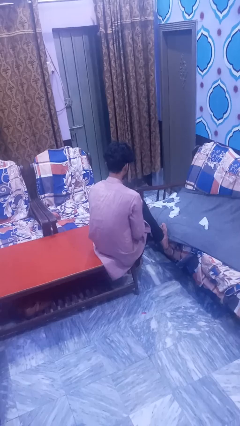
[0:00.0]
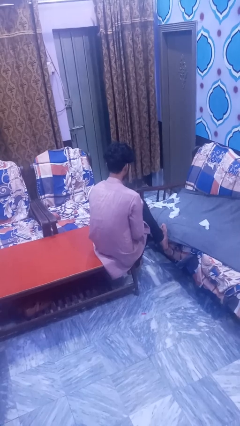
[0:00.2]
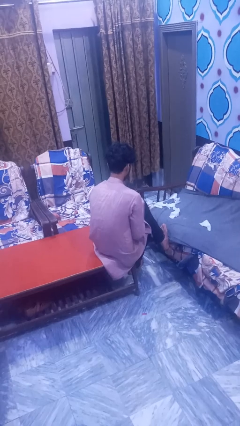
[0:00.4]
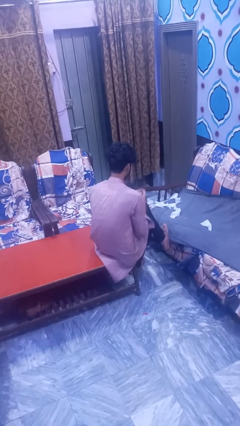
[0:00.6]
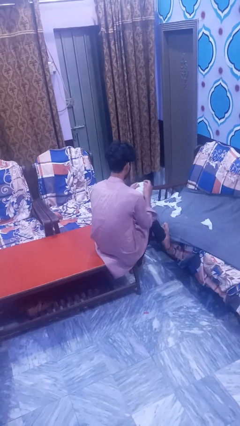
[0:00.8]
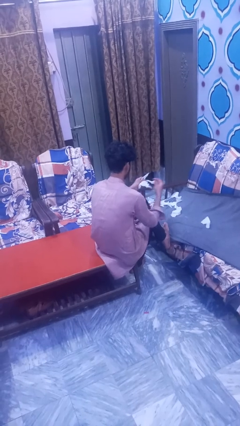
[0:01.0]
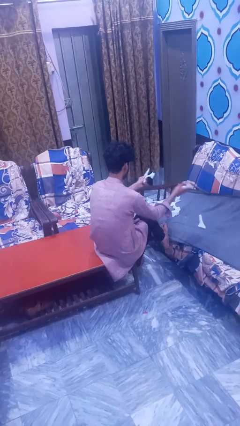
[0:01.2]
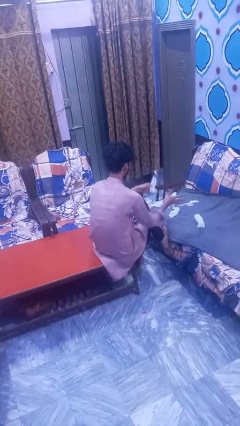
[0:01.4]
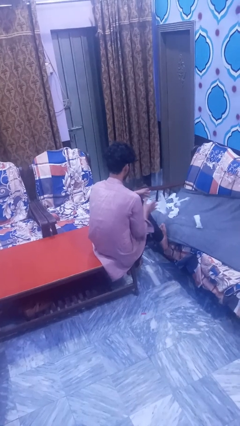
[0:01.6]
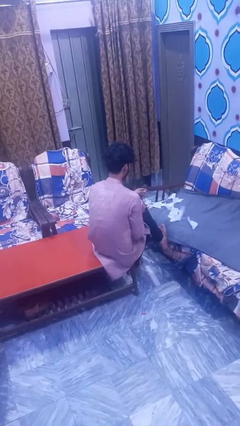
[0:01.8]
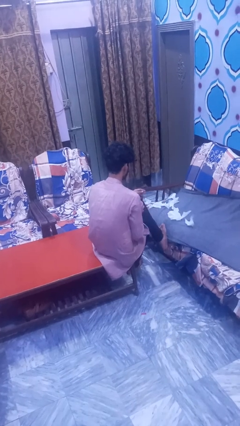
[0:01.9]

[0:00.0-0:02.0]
person tears paper

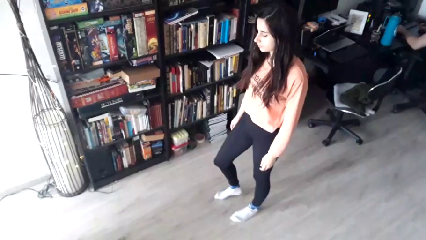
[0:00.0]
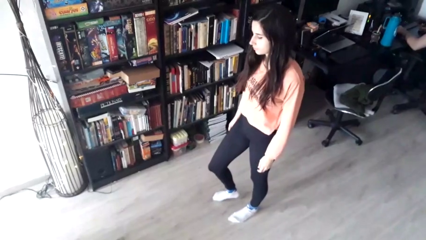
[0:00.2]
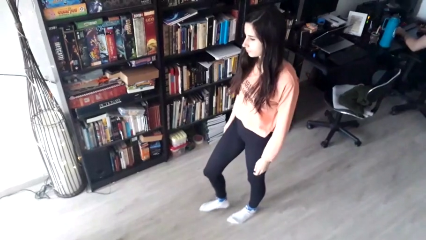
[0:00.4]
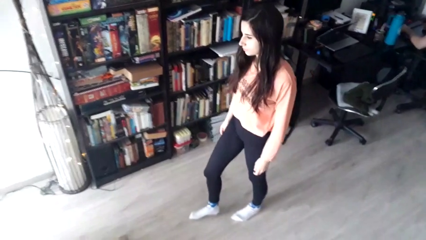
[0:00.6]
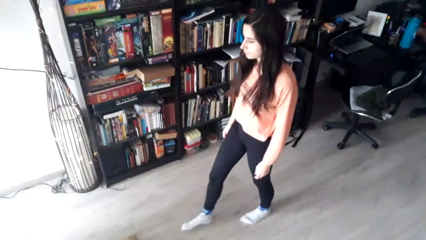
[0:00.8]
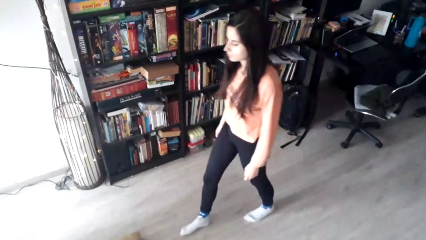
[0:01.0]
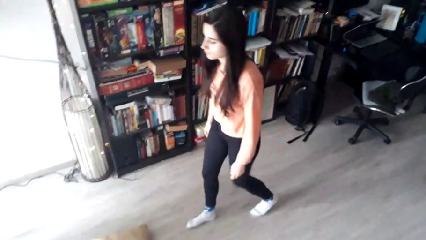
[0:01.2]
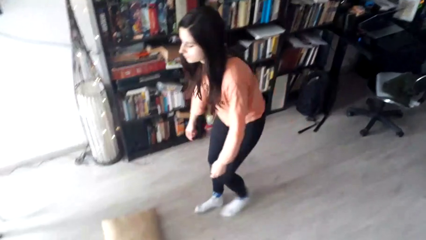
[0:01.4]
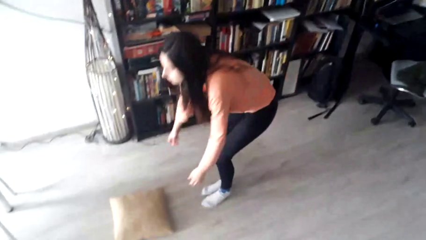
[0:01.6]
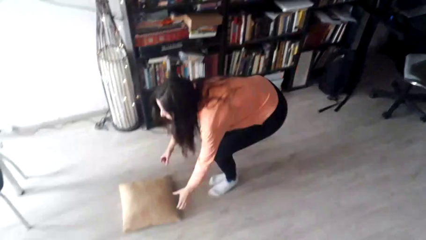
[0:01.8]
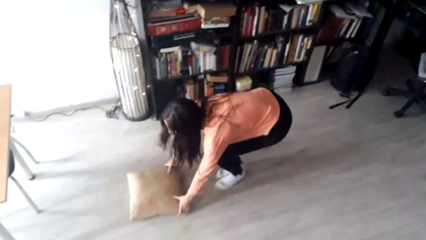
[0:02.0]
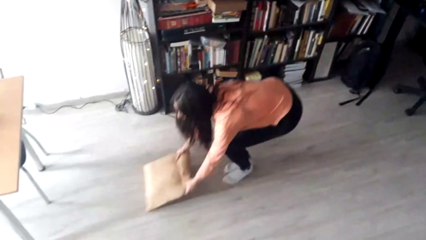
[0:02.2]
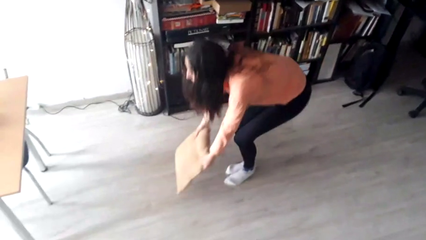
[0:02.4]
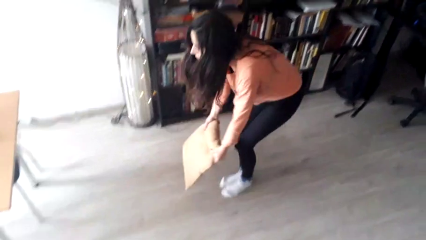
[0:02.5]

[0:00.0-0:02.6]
person picks up object from floor

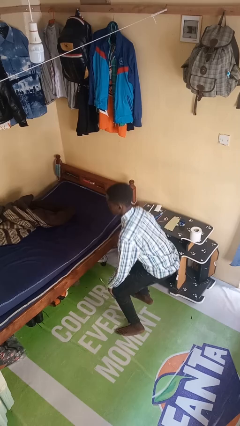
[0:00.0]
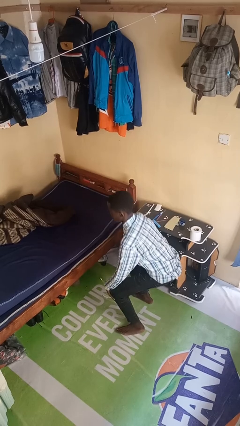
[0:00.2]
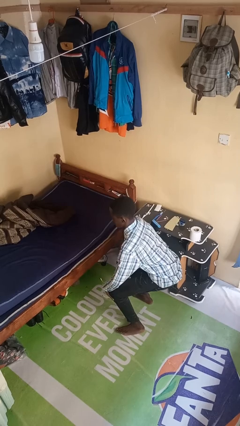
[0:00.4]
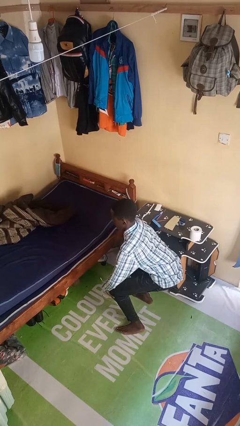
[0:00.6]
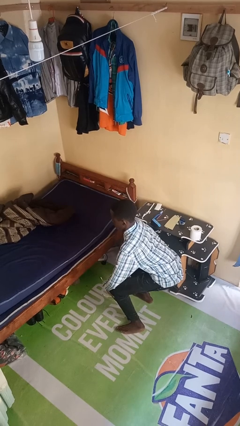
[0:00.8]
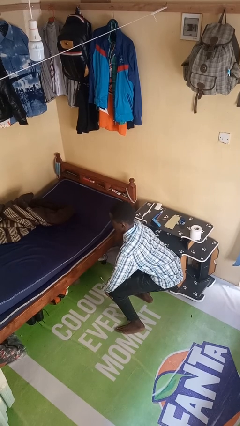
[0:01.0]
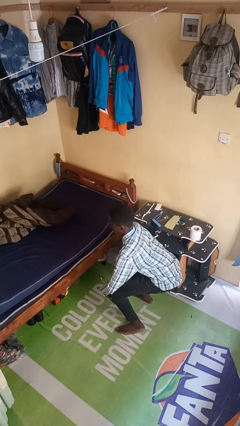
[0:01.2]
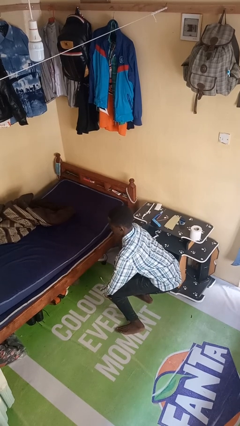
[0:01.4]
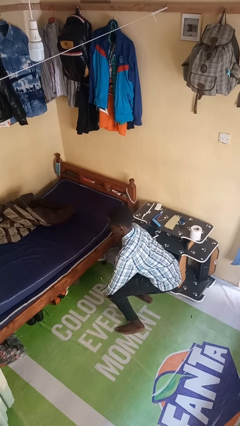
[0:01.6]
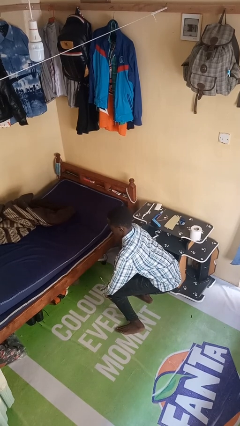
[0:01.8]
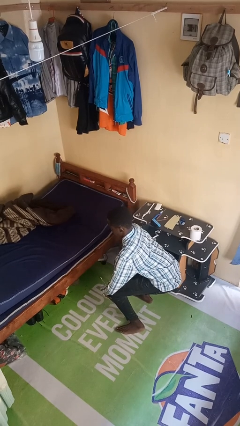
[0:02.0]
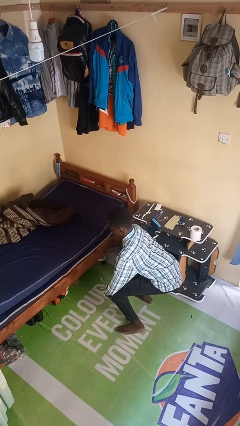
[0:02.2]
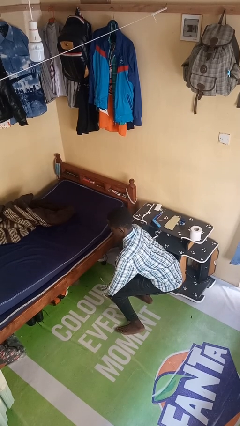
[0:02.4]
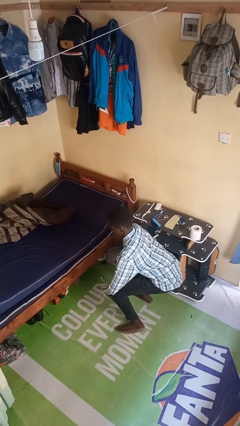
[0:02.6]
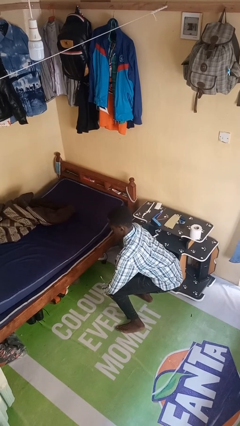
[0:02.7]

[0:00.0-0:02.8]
person squats

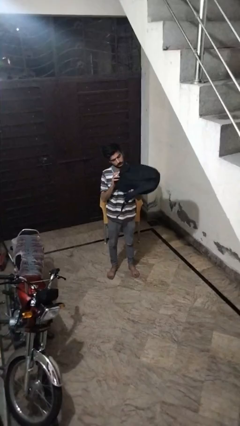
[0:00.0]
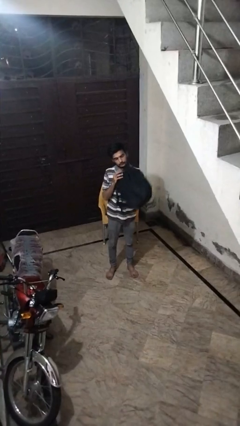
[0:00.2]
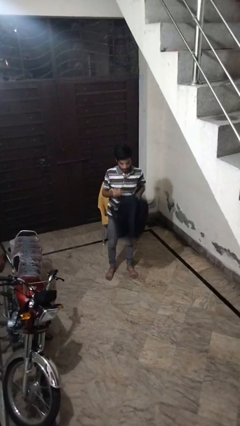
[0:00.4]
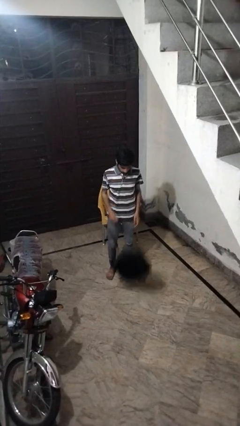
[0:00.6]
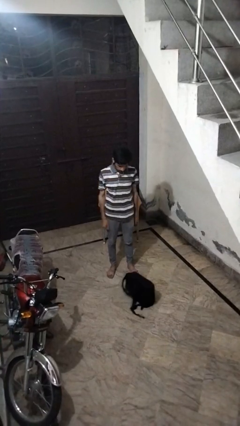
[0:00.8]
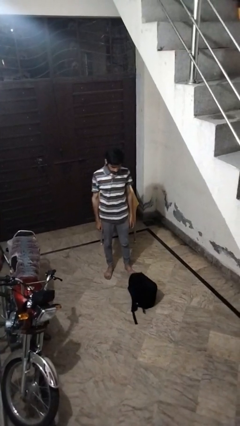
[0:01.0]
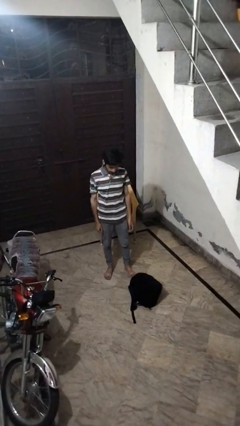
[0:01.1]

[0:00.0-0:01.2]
person drops object

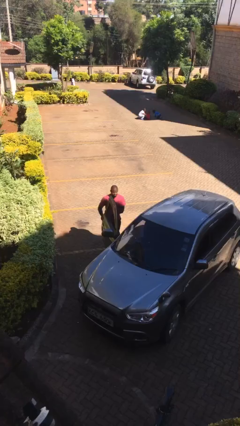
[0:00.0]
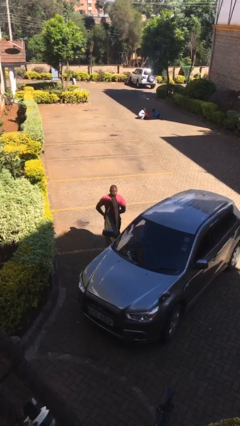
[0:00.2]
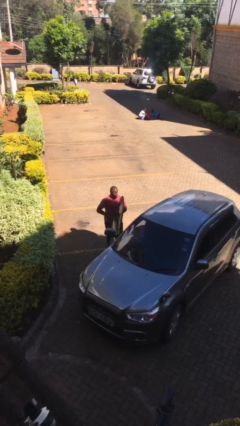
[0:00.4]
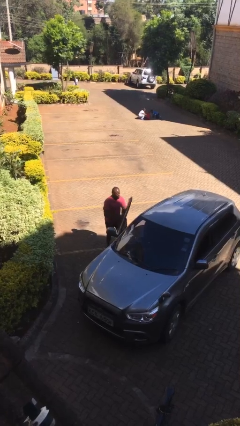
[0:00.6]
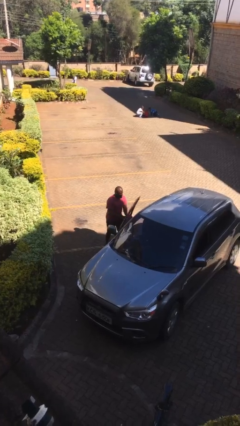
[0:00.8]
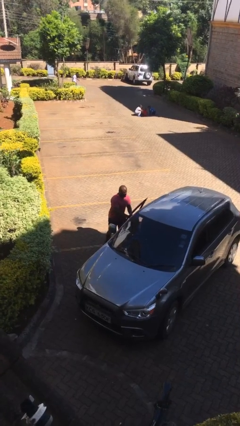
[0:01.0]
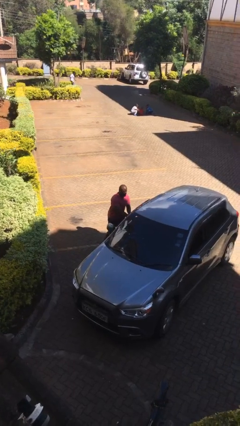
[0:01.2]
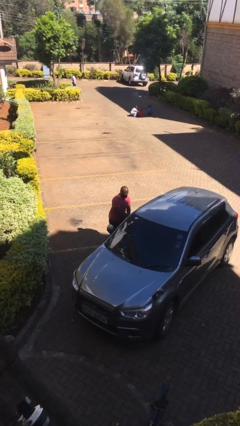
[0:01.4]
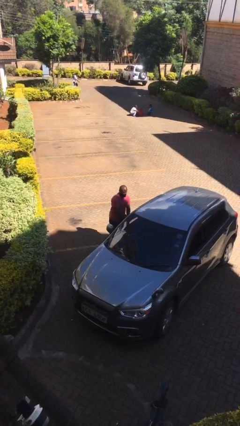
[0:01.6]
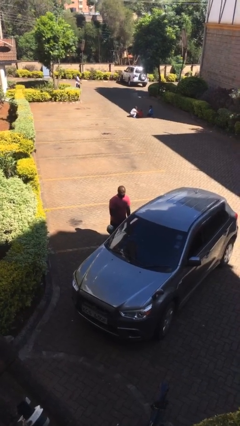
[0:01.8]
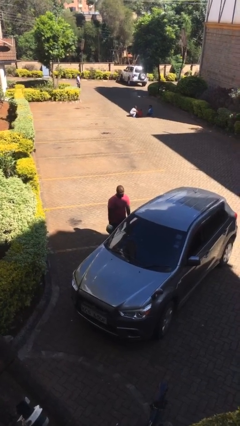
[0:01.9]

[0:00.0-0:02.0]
person closes car door

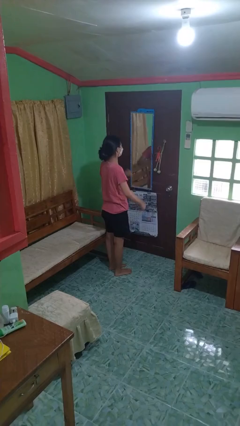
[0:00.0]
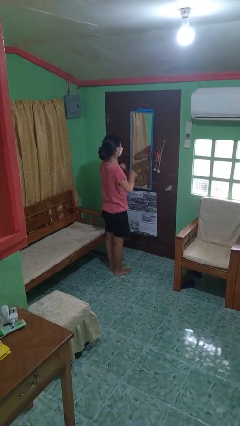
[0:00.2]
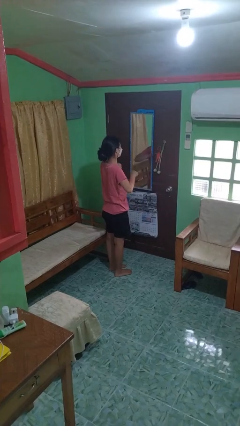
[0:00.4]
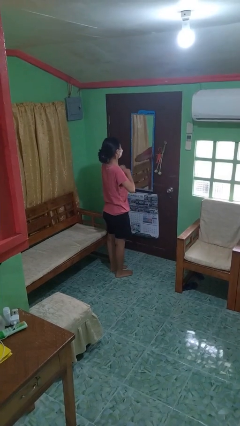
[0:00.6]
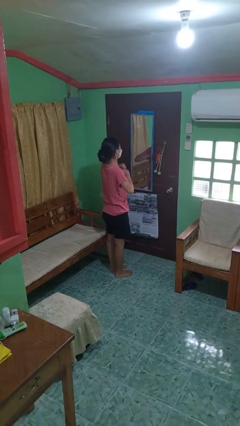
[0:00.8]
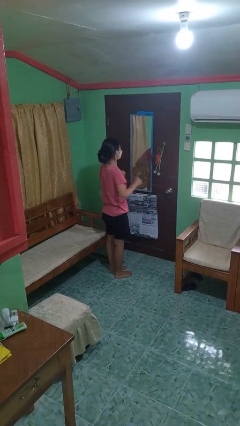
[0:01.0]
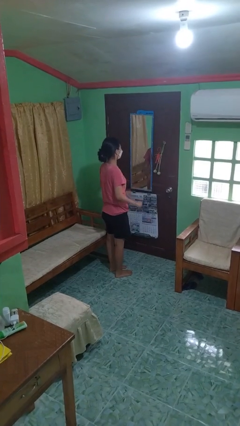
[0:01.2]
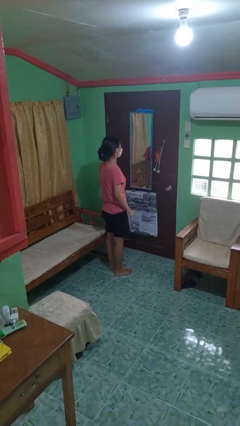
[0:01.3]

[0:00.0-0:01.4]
person drums on chest

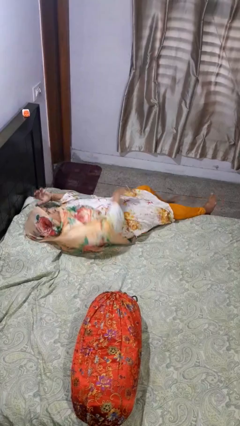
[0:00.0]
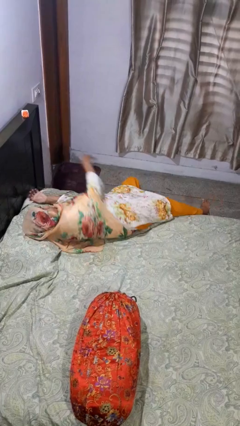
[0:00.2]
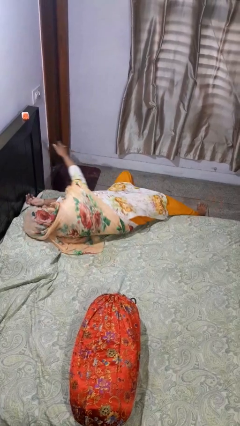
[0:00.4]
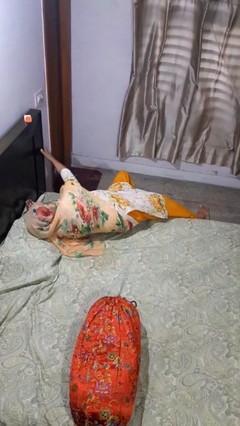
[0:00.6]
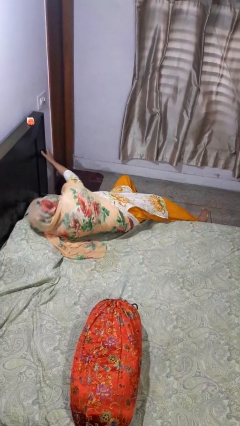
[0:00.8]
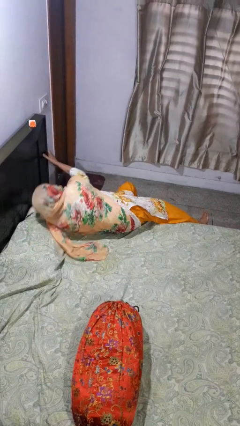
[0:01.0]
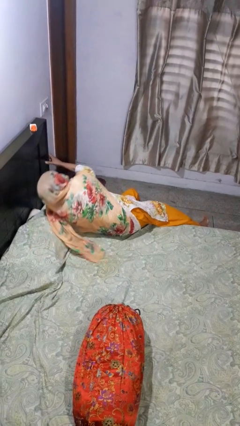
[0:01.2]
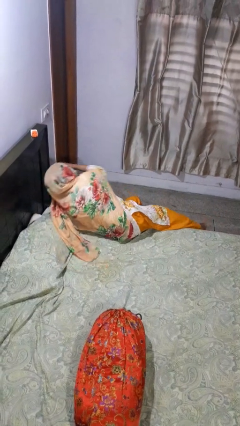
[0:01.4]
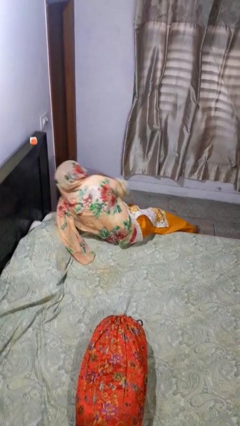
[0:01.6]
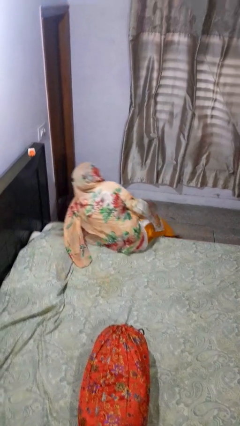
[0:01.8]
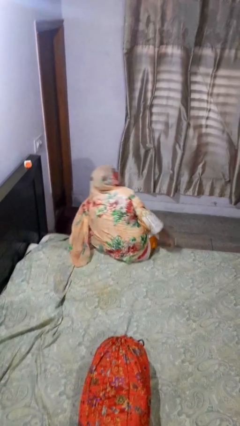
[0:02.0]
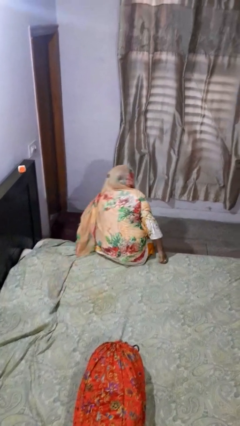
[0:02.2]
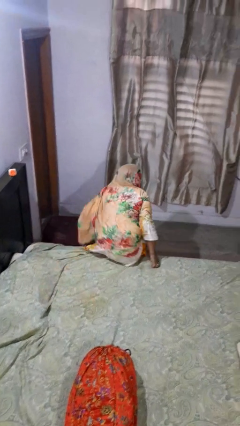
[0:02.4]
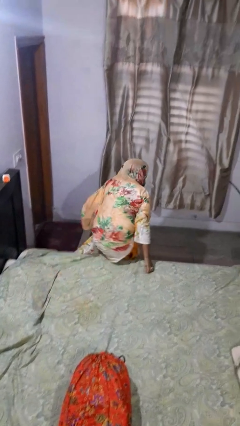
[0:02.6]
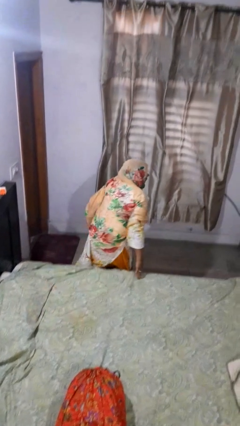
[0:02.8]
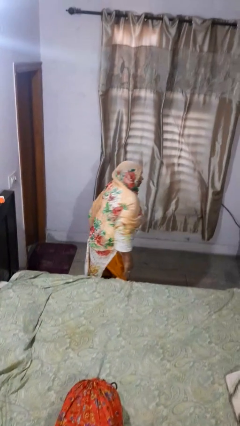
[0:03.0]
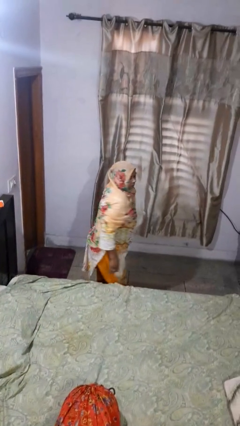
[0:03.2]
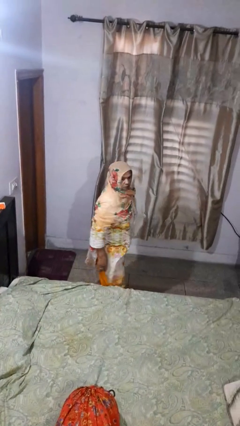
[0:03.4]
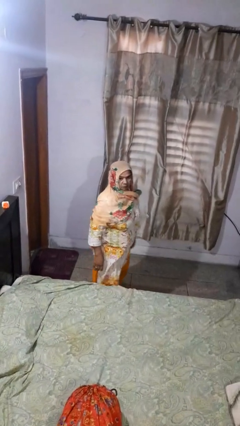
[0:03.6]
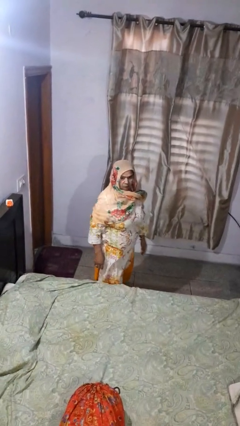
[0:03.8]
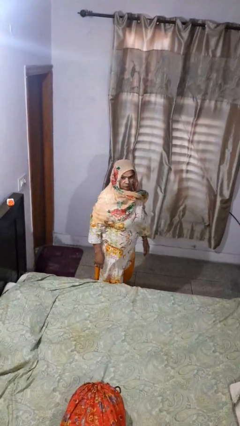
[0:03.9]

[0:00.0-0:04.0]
person stands up

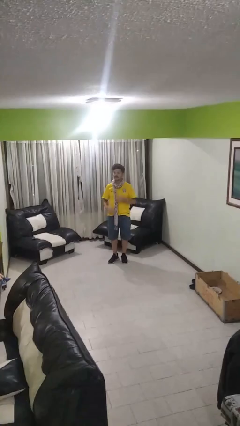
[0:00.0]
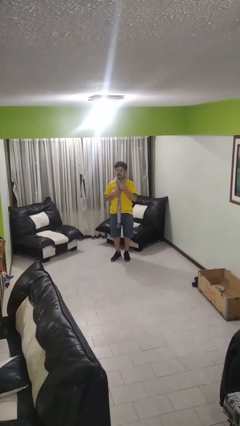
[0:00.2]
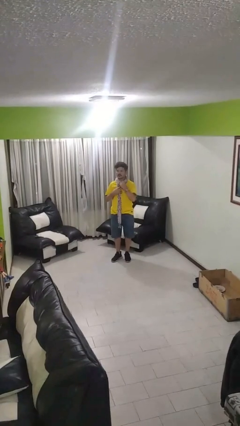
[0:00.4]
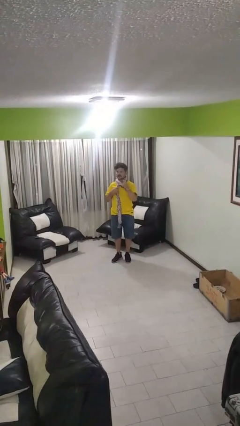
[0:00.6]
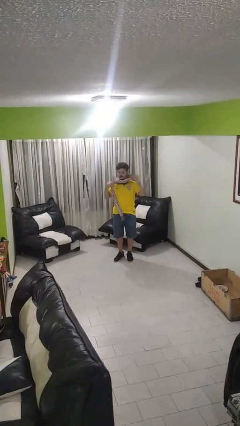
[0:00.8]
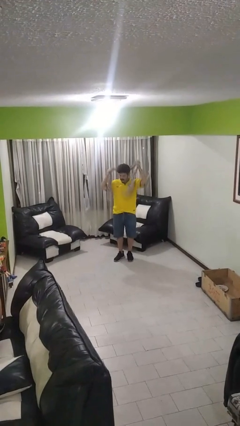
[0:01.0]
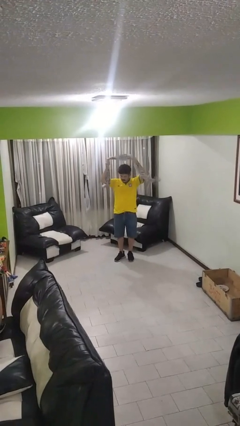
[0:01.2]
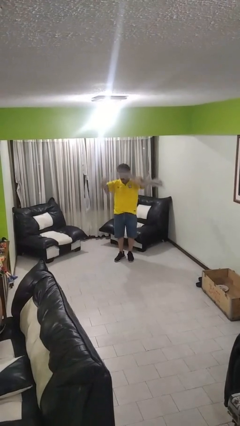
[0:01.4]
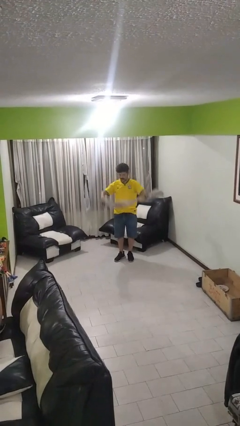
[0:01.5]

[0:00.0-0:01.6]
person takes off scarf
